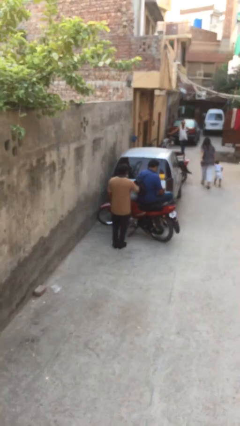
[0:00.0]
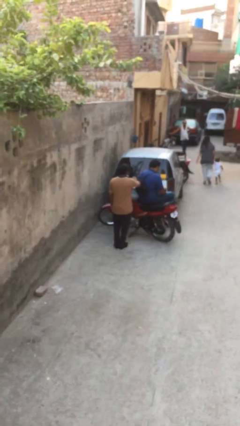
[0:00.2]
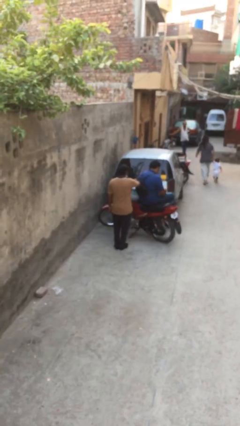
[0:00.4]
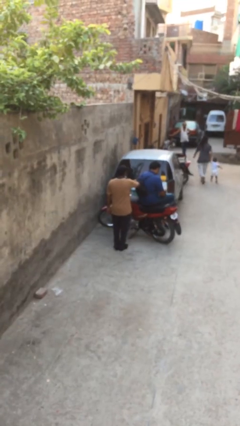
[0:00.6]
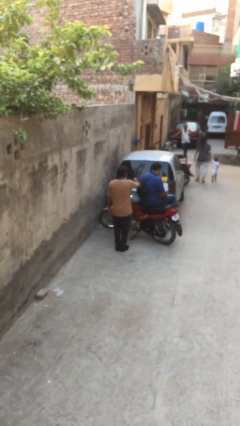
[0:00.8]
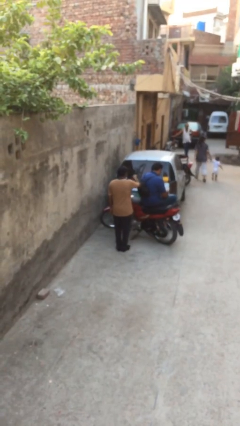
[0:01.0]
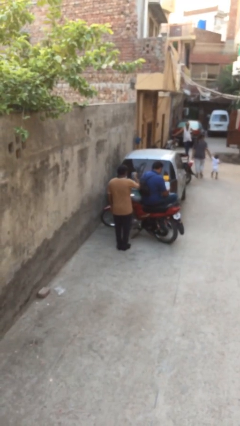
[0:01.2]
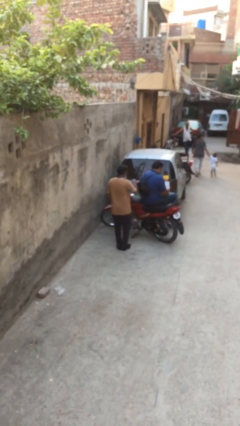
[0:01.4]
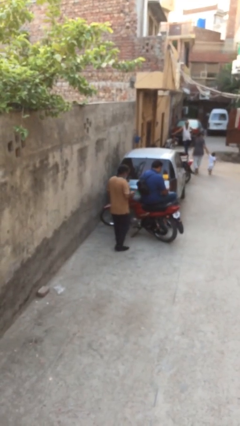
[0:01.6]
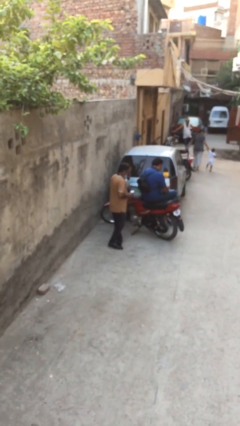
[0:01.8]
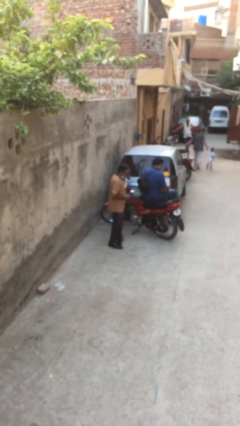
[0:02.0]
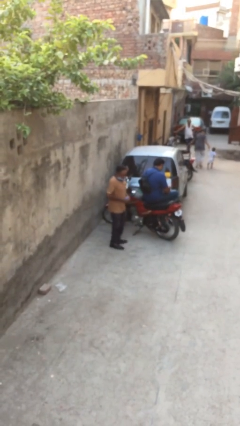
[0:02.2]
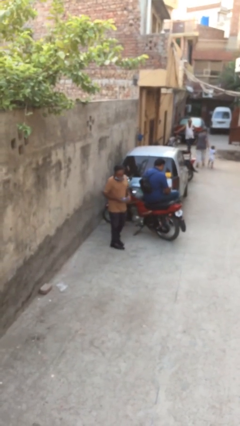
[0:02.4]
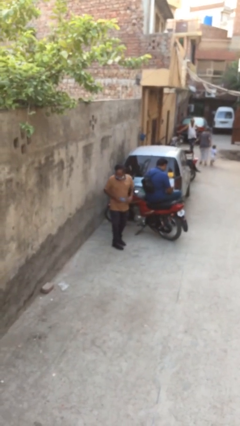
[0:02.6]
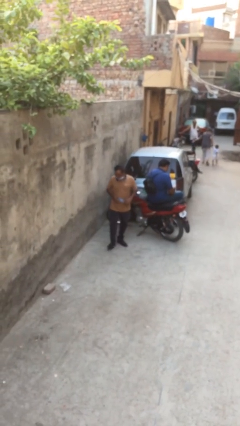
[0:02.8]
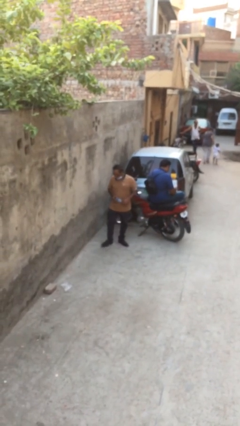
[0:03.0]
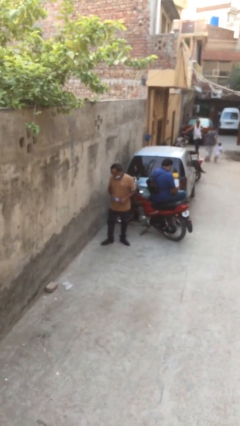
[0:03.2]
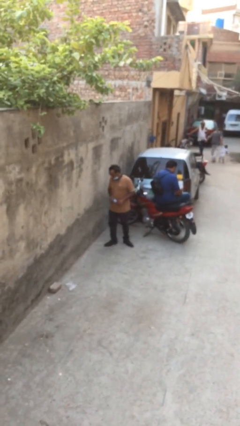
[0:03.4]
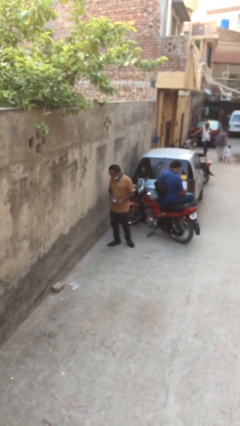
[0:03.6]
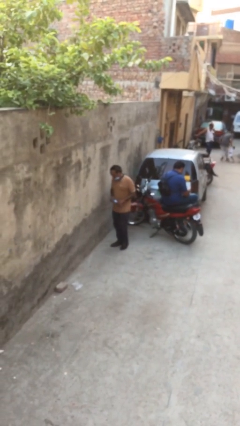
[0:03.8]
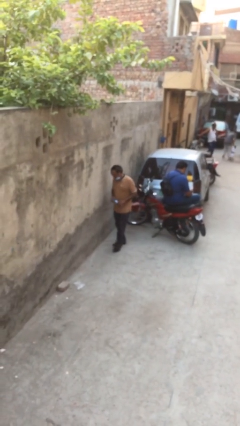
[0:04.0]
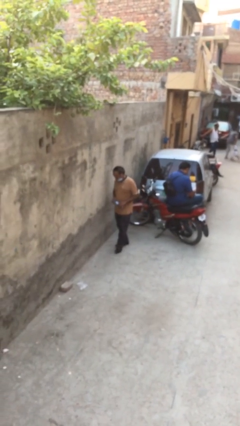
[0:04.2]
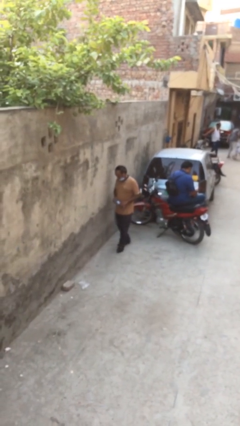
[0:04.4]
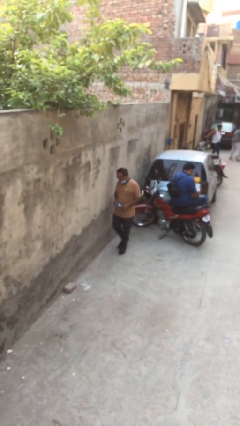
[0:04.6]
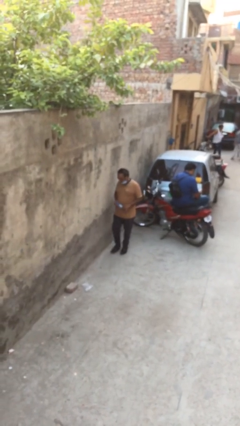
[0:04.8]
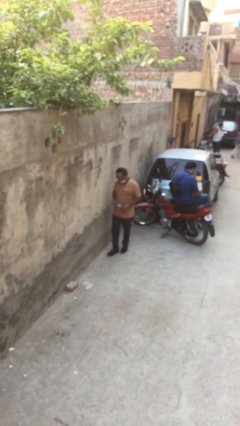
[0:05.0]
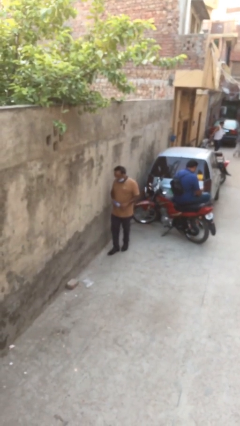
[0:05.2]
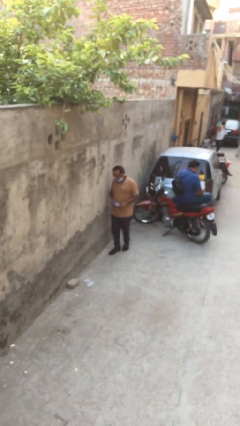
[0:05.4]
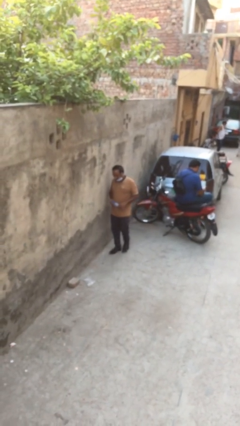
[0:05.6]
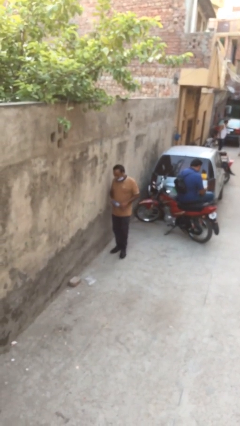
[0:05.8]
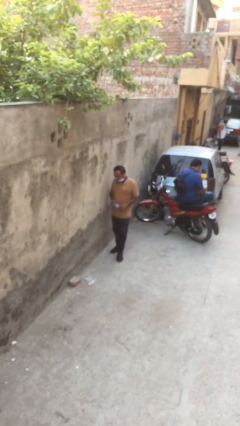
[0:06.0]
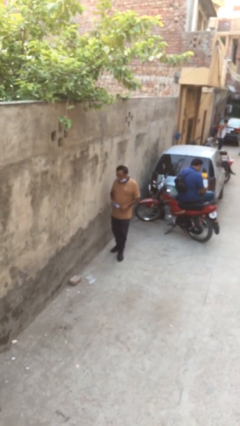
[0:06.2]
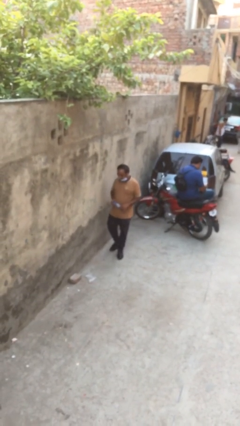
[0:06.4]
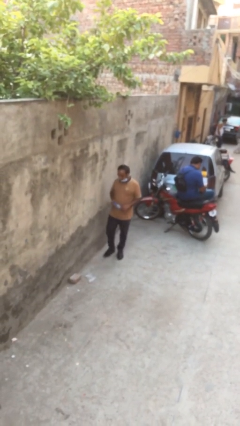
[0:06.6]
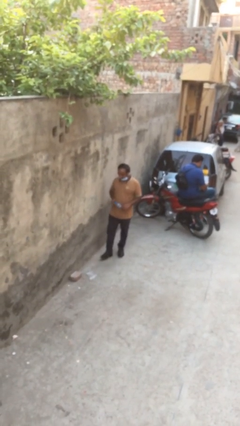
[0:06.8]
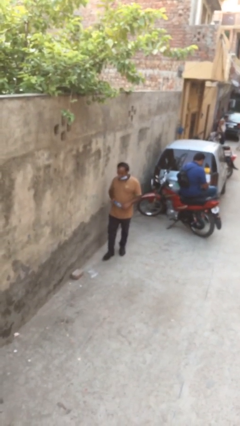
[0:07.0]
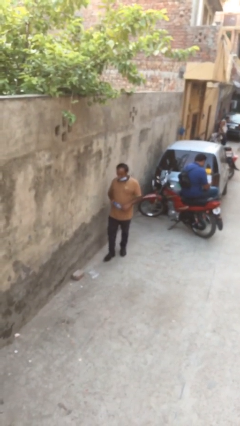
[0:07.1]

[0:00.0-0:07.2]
person steals object from person

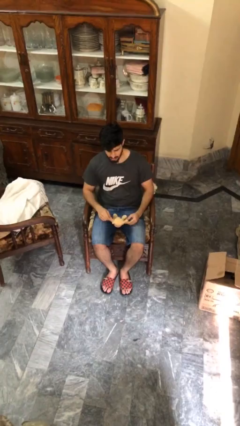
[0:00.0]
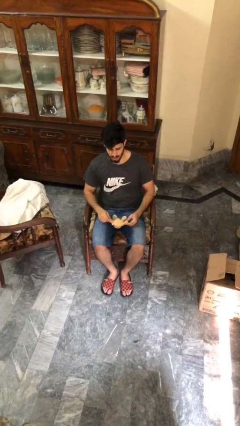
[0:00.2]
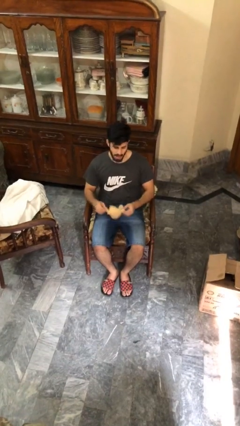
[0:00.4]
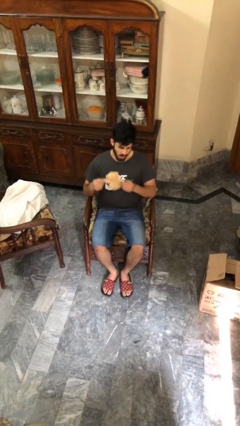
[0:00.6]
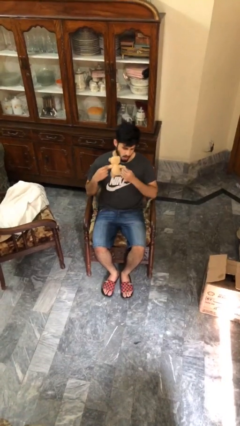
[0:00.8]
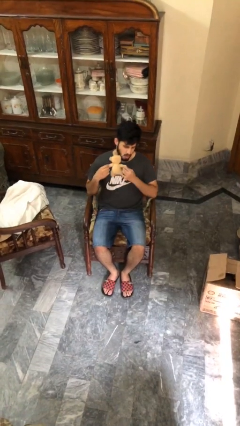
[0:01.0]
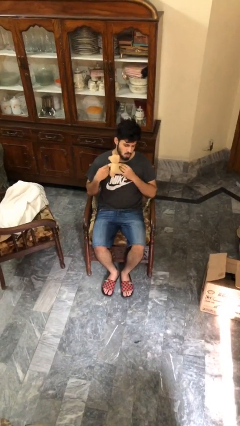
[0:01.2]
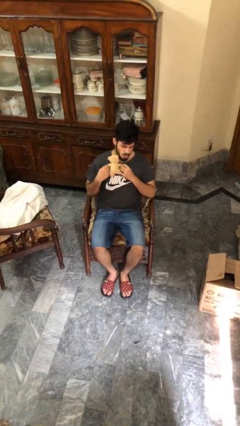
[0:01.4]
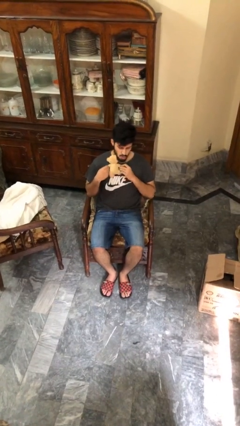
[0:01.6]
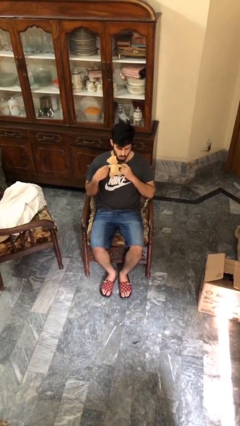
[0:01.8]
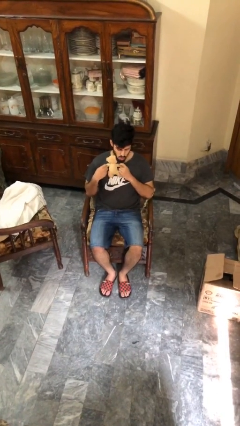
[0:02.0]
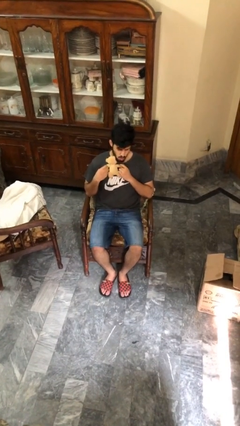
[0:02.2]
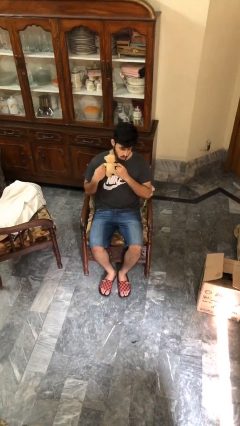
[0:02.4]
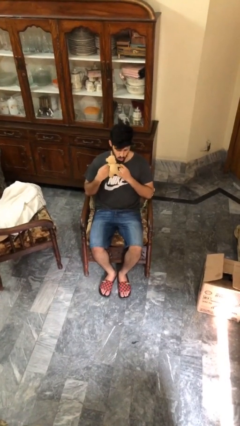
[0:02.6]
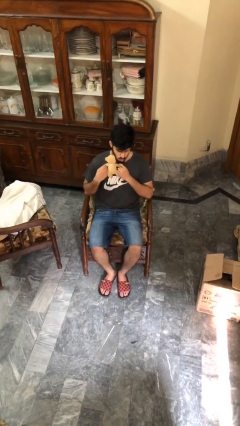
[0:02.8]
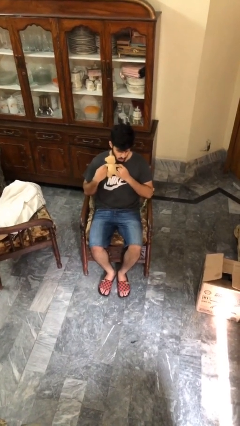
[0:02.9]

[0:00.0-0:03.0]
person hugs stuffed animal

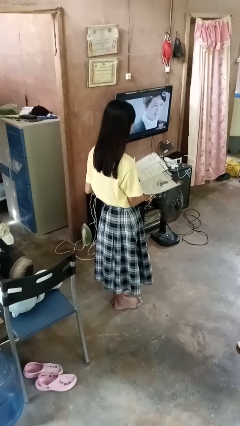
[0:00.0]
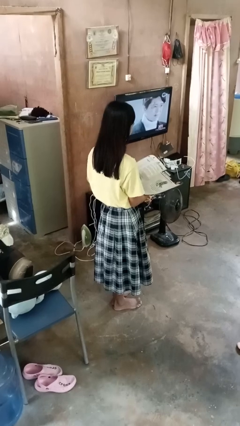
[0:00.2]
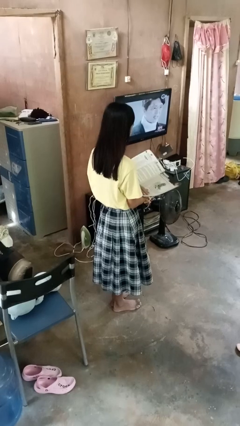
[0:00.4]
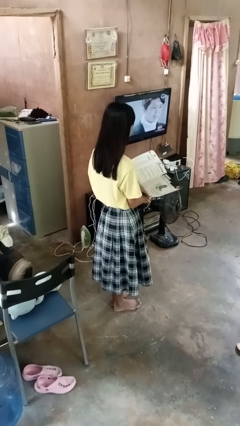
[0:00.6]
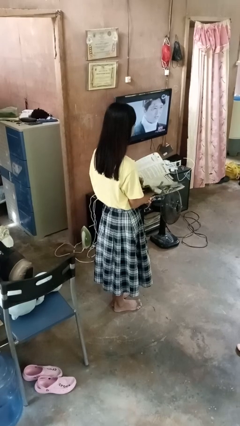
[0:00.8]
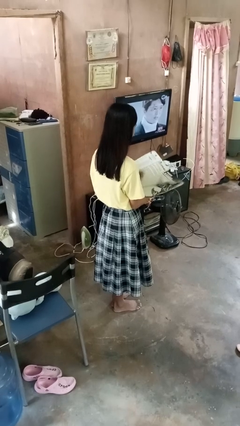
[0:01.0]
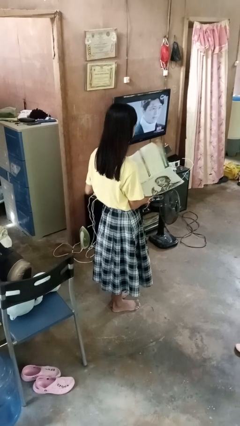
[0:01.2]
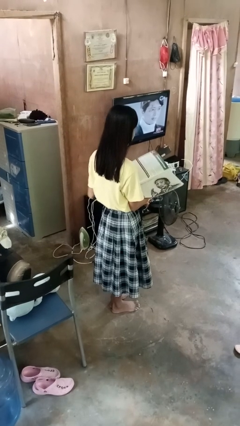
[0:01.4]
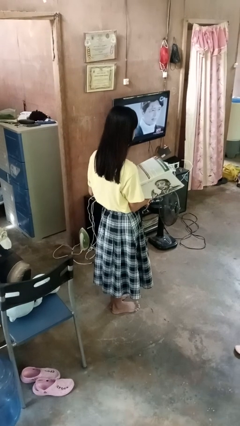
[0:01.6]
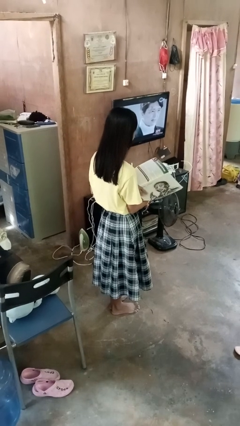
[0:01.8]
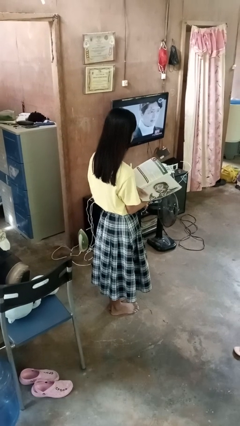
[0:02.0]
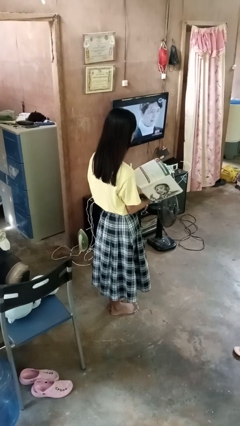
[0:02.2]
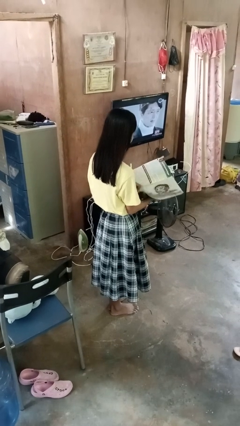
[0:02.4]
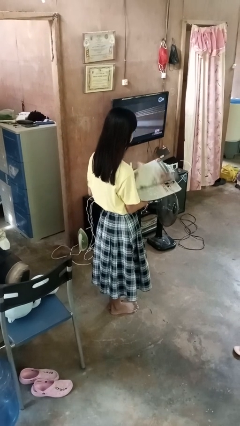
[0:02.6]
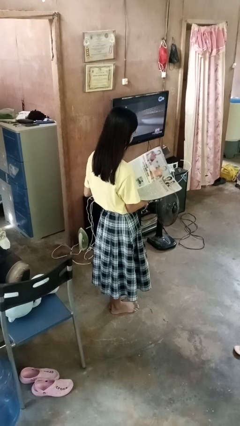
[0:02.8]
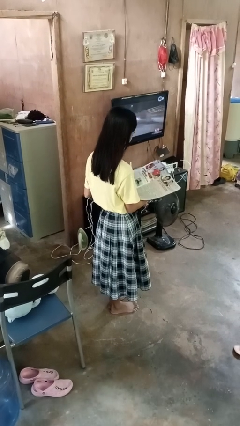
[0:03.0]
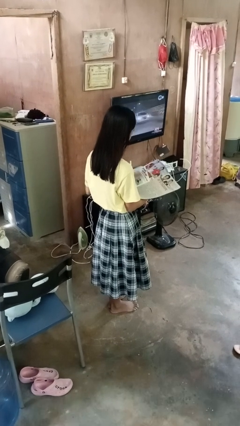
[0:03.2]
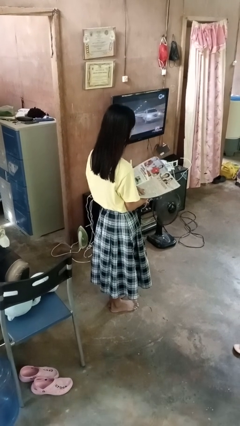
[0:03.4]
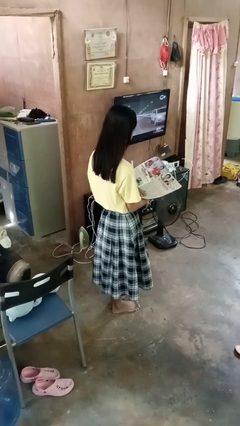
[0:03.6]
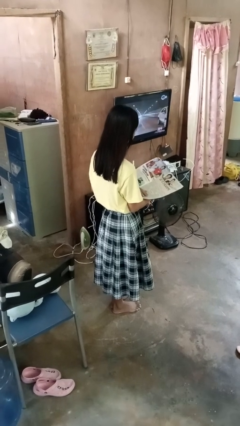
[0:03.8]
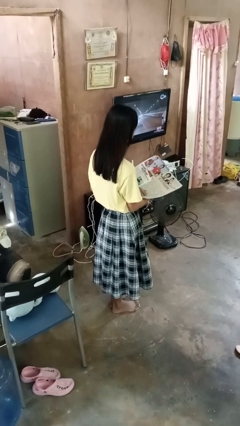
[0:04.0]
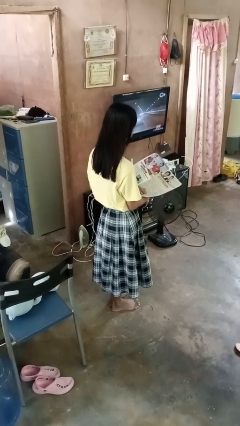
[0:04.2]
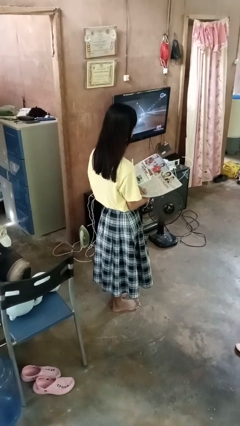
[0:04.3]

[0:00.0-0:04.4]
person reads magazine

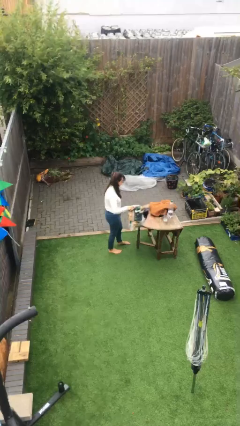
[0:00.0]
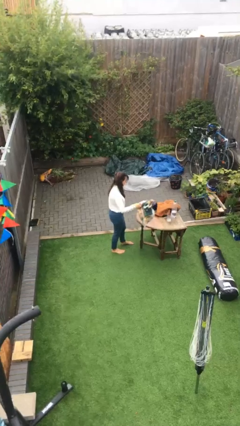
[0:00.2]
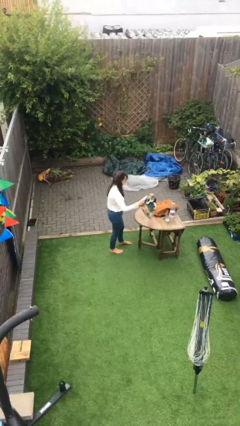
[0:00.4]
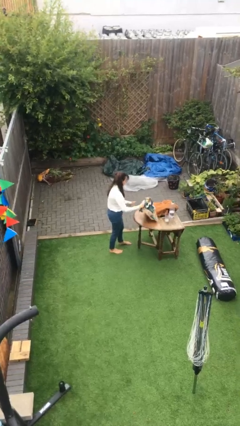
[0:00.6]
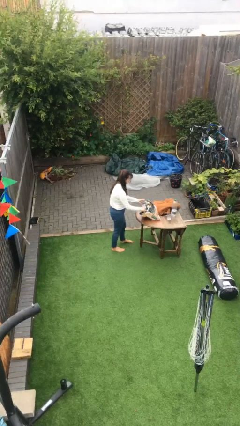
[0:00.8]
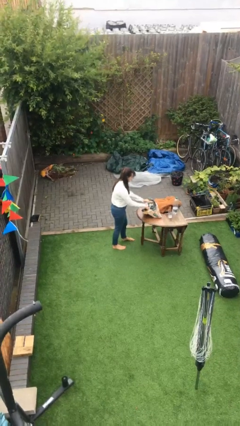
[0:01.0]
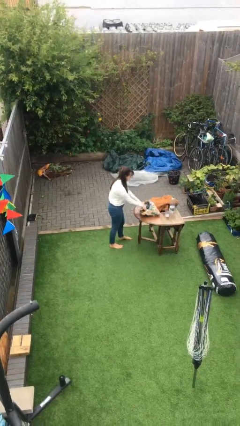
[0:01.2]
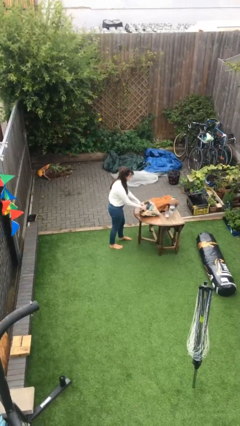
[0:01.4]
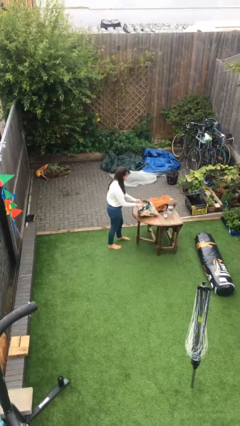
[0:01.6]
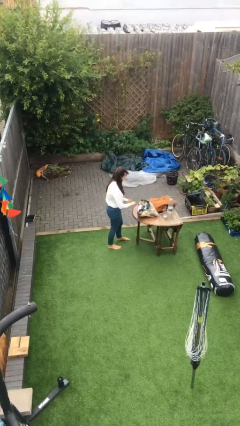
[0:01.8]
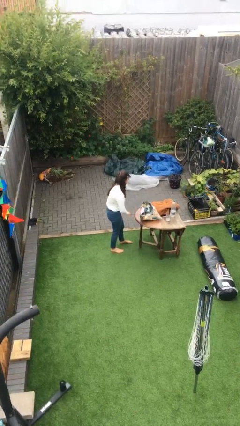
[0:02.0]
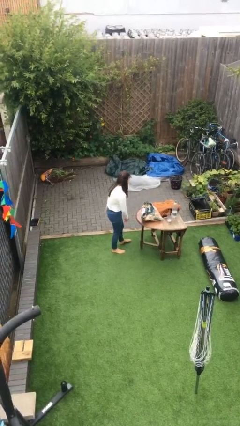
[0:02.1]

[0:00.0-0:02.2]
person puts down object on table

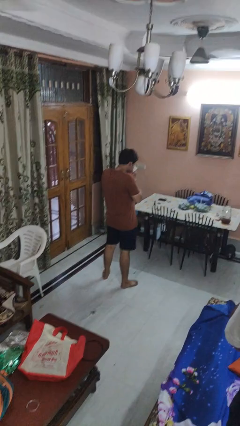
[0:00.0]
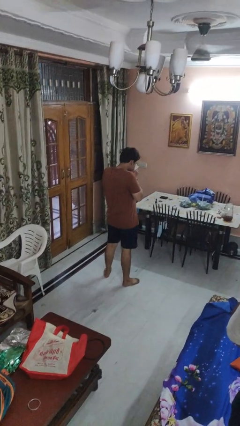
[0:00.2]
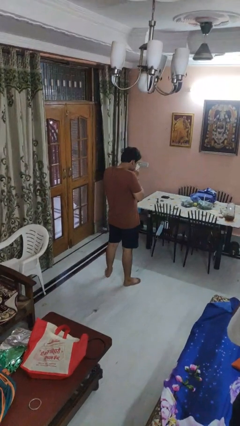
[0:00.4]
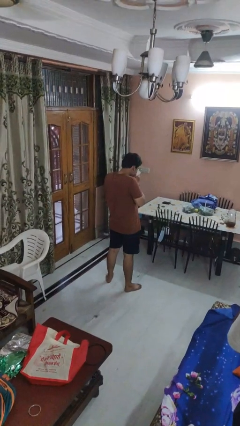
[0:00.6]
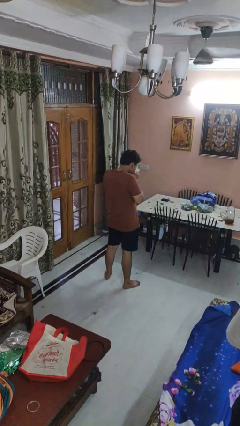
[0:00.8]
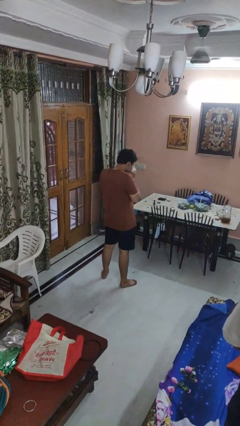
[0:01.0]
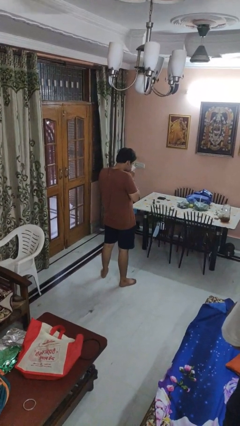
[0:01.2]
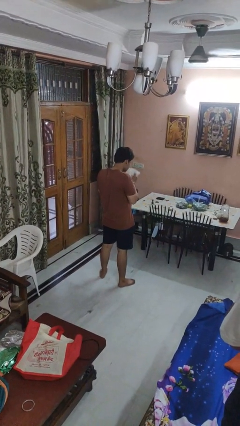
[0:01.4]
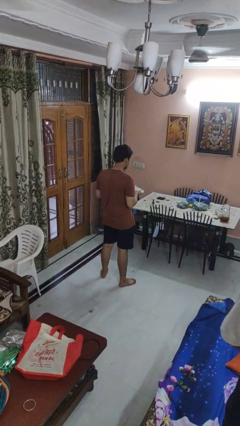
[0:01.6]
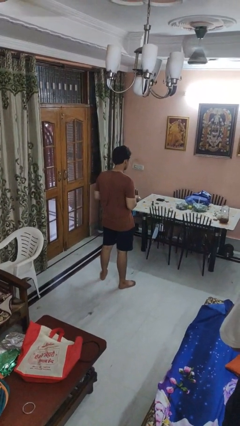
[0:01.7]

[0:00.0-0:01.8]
person blows nose
